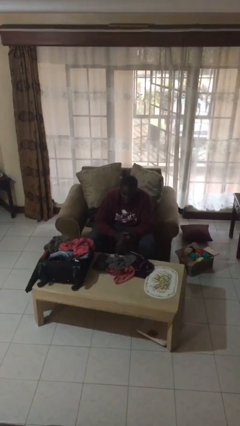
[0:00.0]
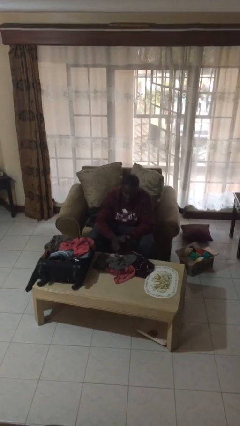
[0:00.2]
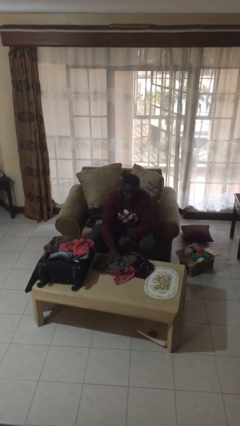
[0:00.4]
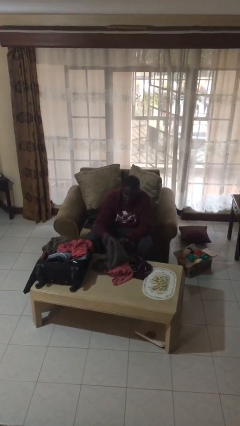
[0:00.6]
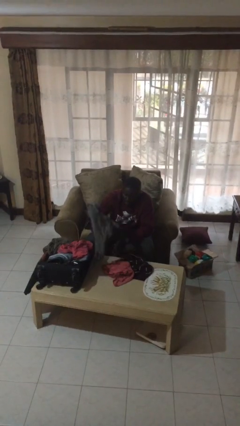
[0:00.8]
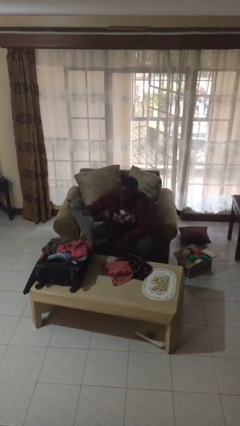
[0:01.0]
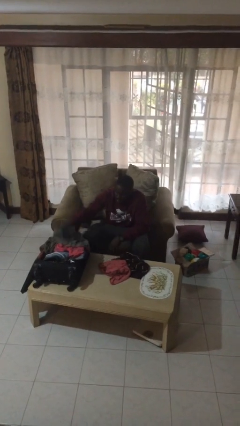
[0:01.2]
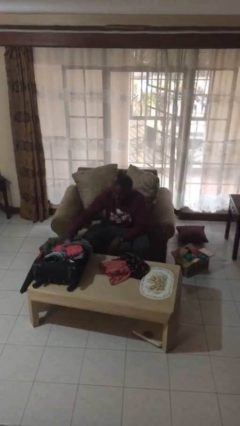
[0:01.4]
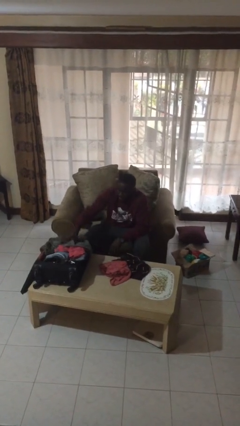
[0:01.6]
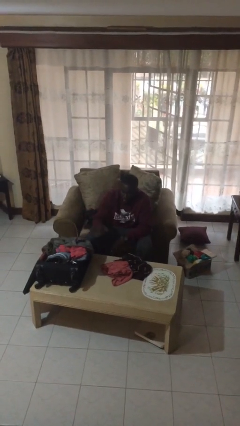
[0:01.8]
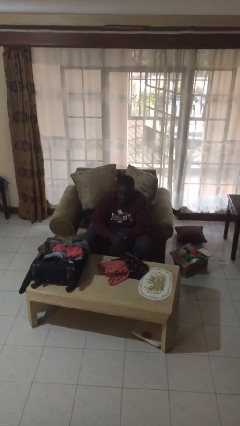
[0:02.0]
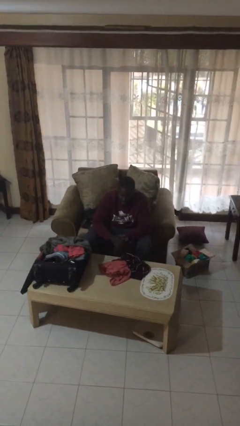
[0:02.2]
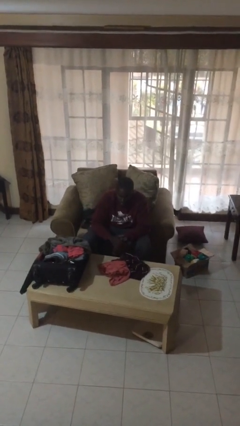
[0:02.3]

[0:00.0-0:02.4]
person loads clothes into suitcase

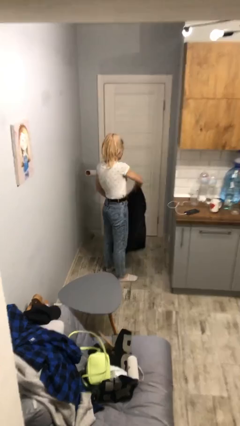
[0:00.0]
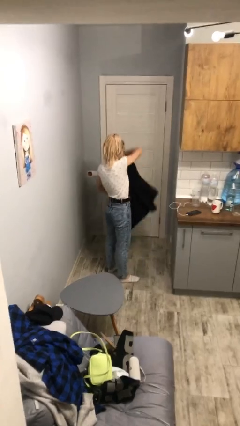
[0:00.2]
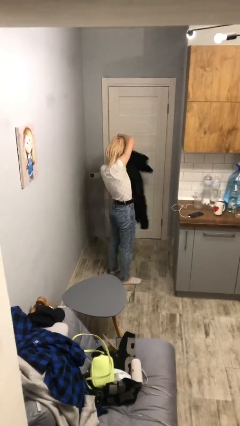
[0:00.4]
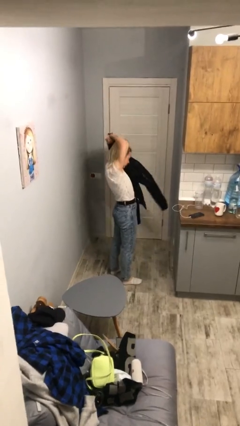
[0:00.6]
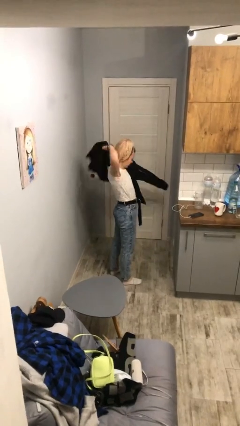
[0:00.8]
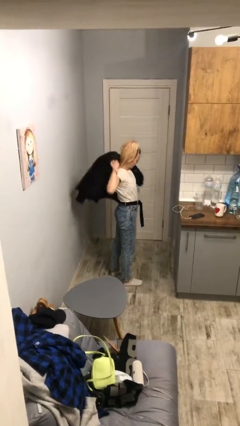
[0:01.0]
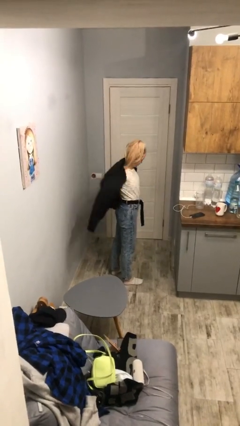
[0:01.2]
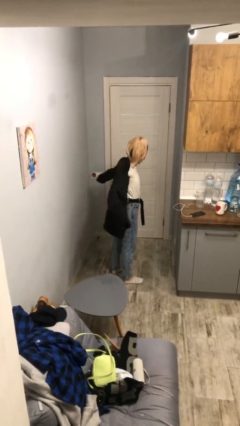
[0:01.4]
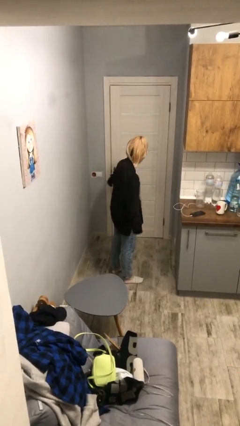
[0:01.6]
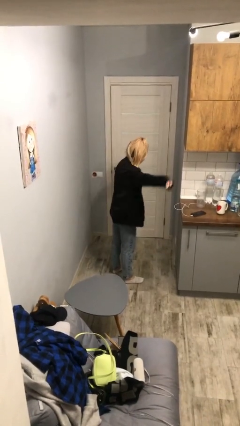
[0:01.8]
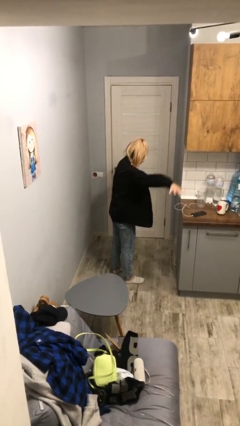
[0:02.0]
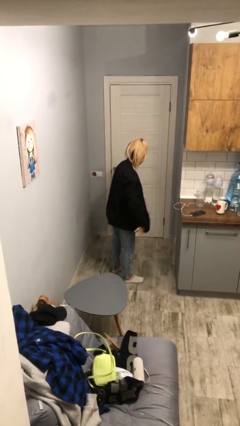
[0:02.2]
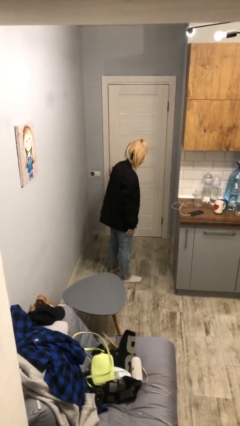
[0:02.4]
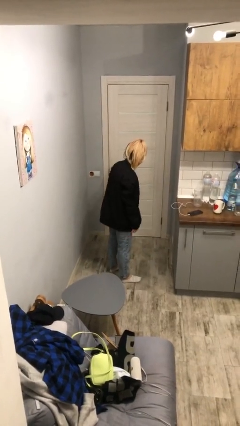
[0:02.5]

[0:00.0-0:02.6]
person puts on jacket

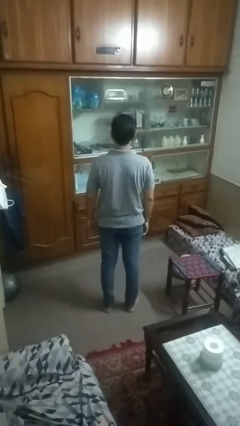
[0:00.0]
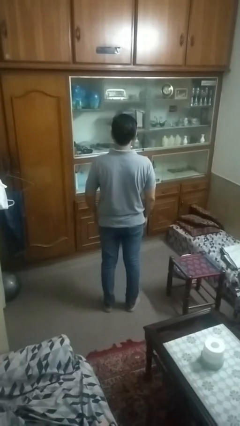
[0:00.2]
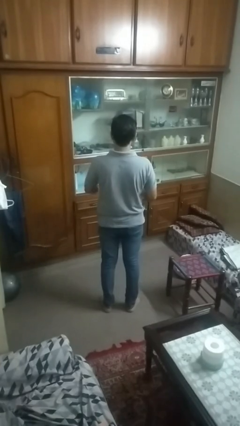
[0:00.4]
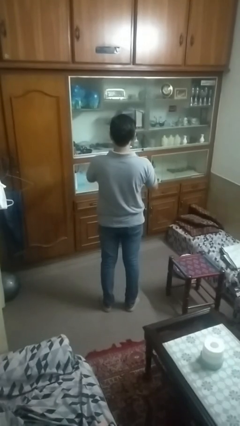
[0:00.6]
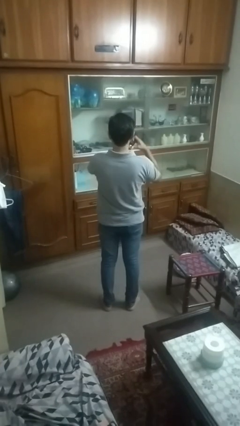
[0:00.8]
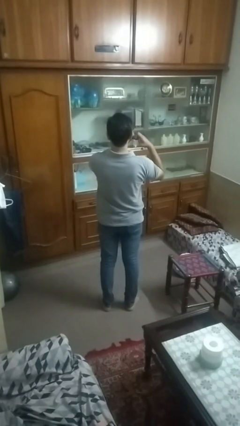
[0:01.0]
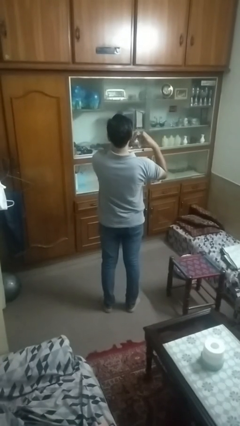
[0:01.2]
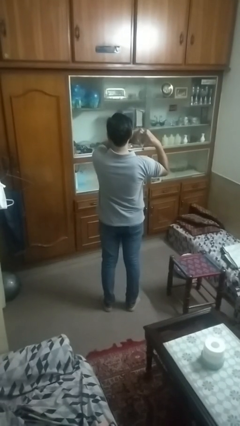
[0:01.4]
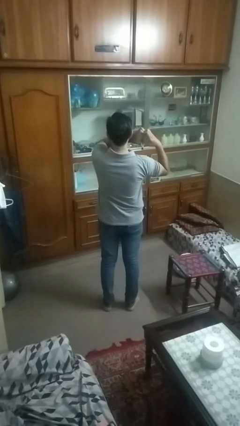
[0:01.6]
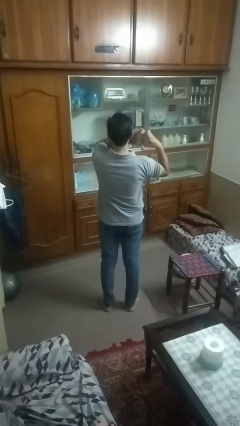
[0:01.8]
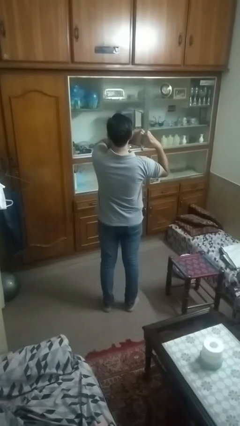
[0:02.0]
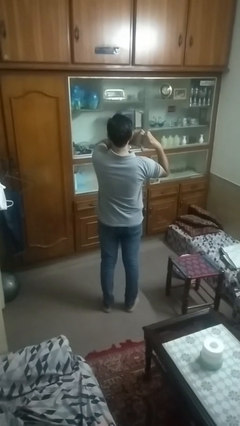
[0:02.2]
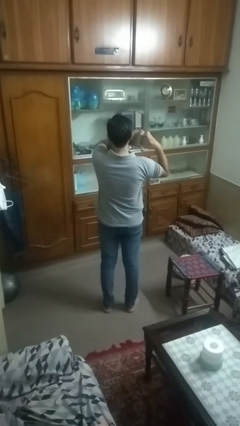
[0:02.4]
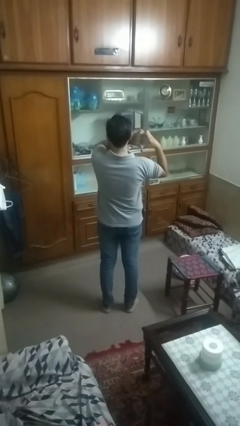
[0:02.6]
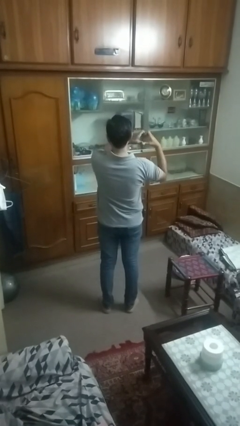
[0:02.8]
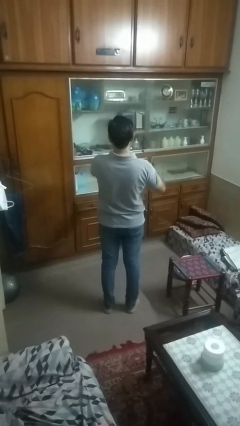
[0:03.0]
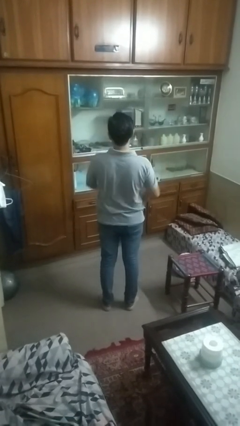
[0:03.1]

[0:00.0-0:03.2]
person gestures heart

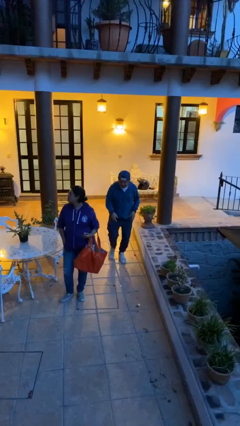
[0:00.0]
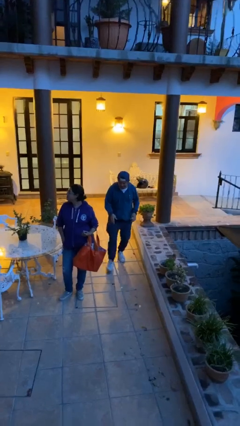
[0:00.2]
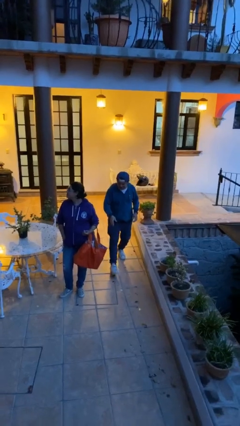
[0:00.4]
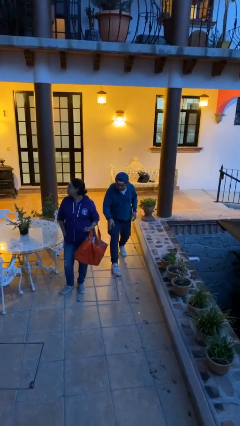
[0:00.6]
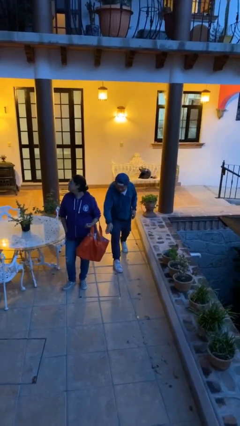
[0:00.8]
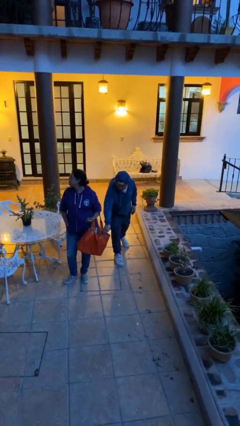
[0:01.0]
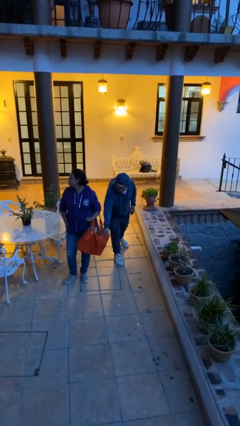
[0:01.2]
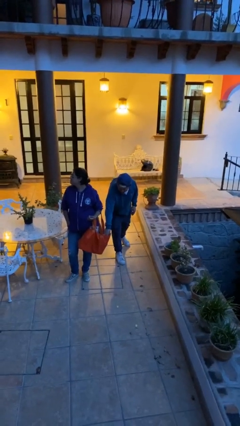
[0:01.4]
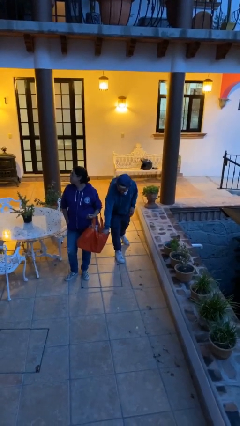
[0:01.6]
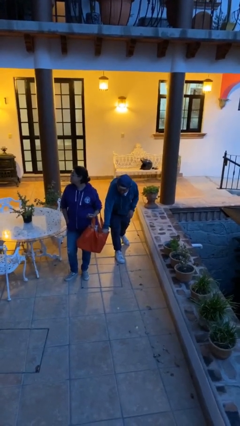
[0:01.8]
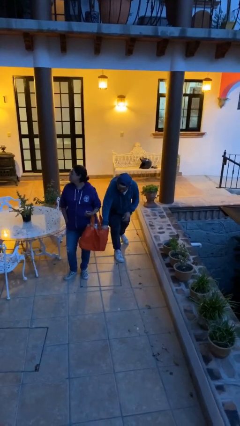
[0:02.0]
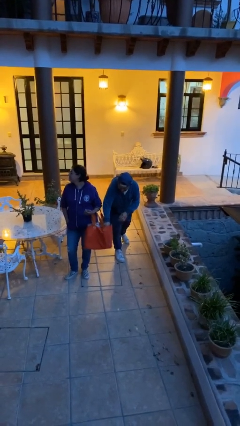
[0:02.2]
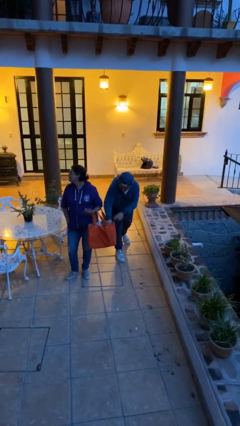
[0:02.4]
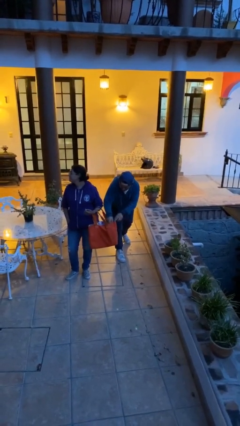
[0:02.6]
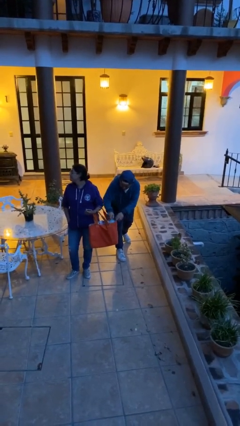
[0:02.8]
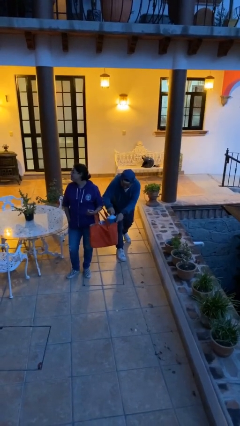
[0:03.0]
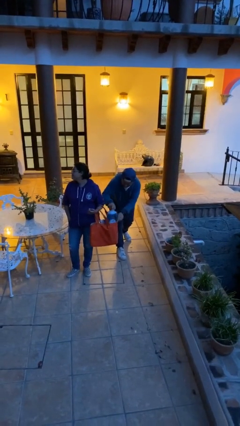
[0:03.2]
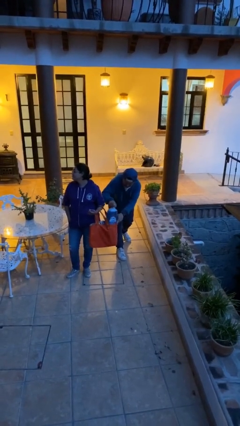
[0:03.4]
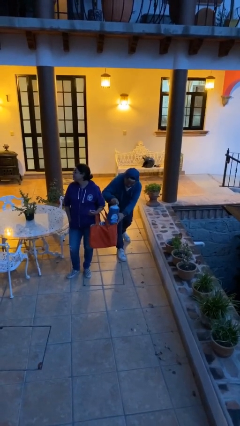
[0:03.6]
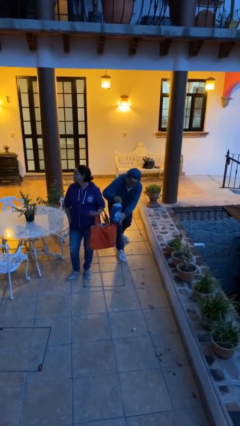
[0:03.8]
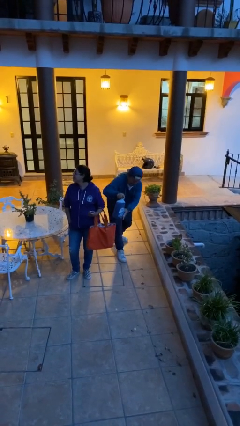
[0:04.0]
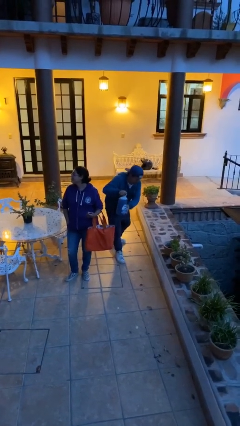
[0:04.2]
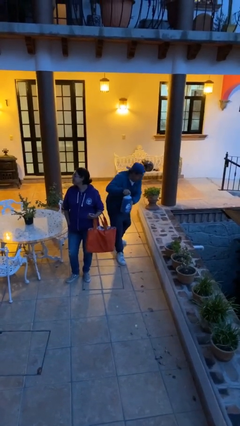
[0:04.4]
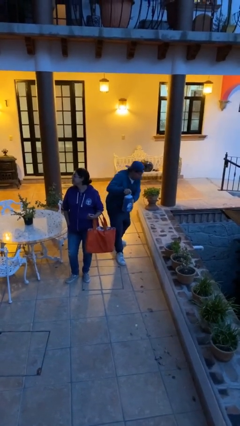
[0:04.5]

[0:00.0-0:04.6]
person steals object from person

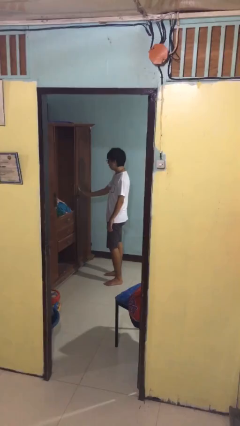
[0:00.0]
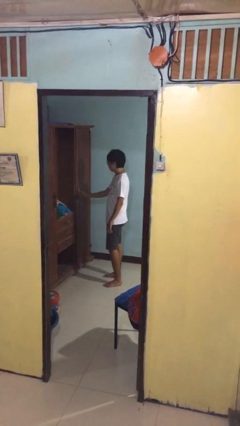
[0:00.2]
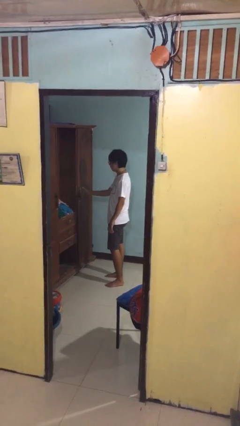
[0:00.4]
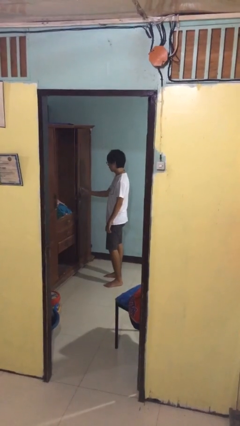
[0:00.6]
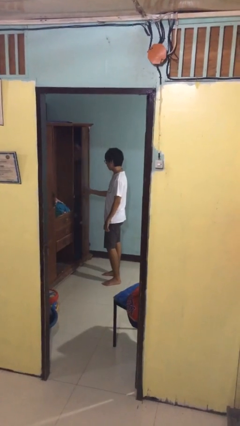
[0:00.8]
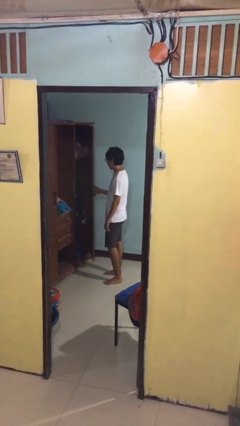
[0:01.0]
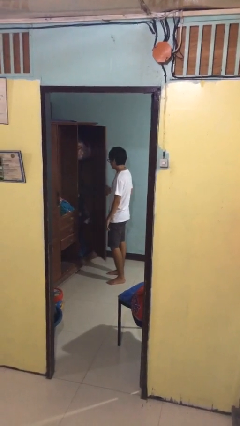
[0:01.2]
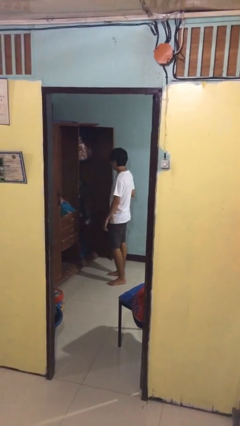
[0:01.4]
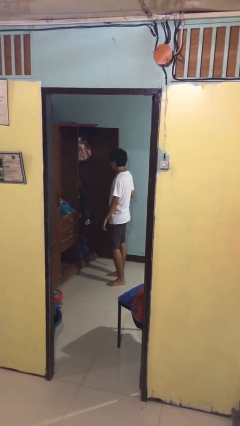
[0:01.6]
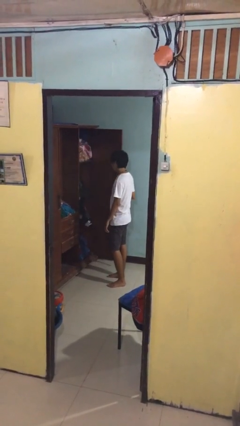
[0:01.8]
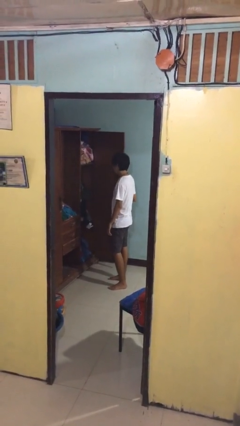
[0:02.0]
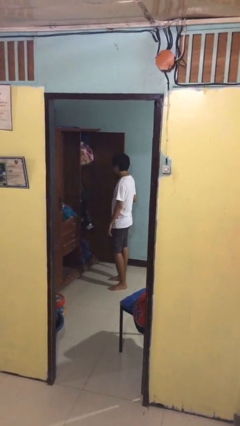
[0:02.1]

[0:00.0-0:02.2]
person opens closet door

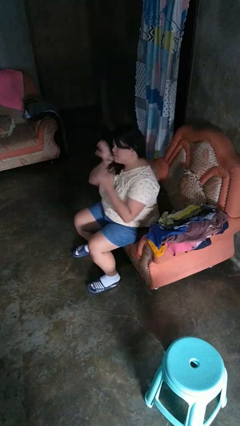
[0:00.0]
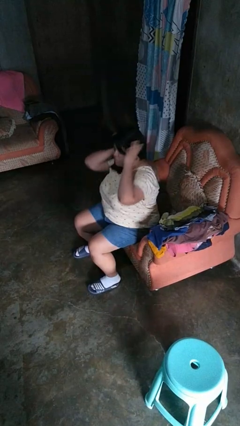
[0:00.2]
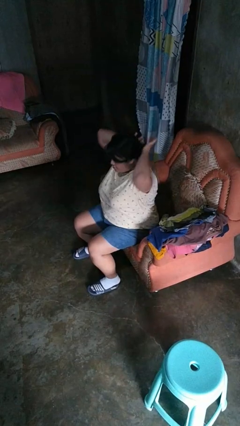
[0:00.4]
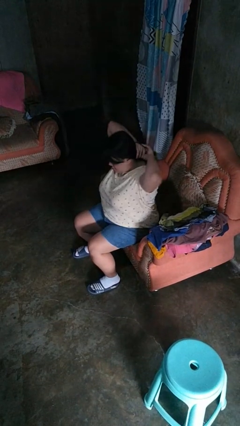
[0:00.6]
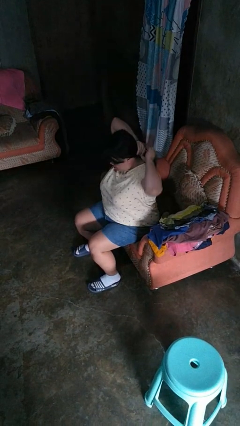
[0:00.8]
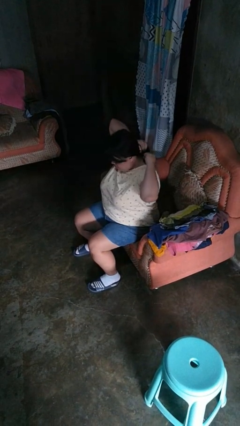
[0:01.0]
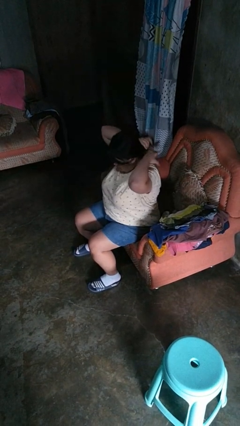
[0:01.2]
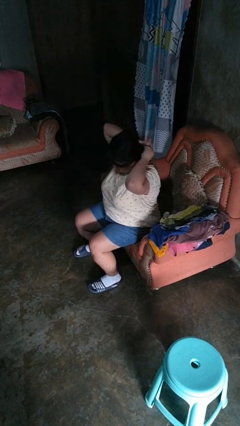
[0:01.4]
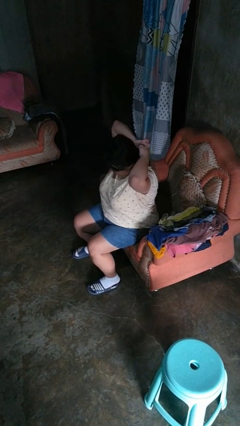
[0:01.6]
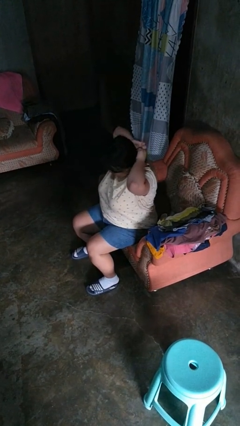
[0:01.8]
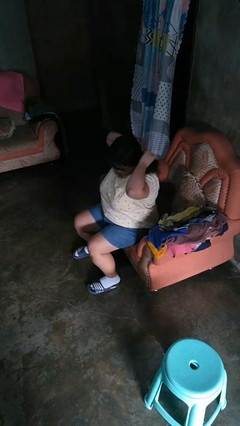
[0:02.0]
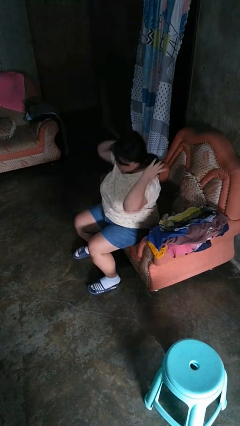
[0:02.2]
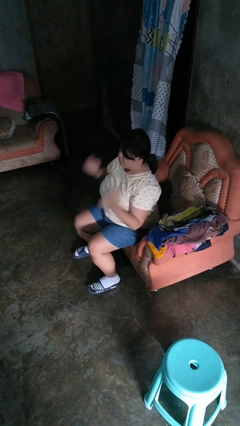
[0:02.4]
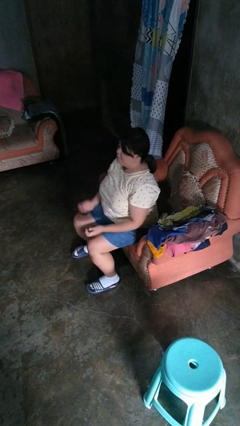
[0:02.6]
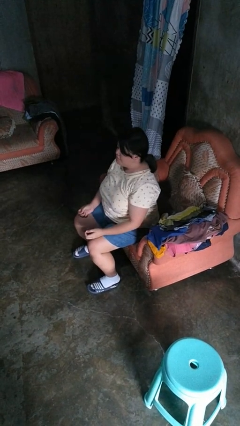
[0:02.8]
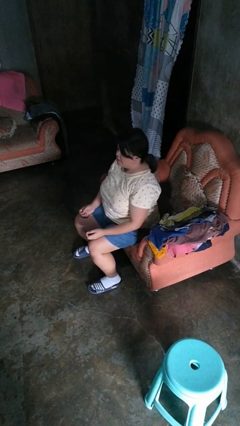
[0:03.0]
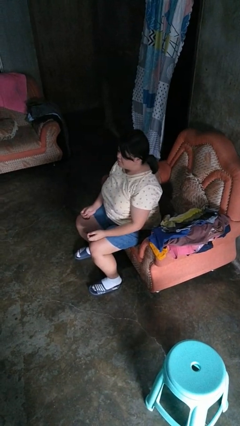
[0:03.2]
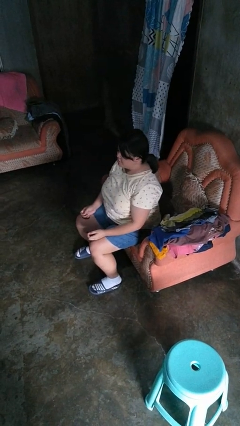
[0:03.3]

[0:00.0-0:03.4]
person puts hair in ponytail
